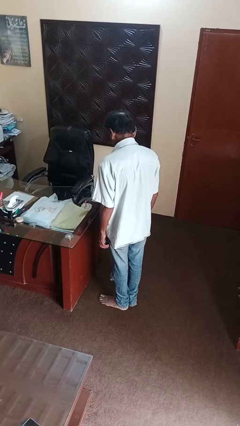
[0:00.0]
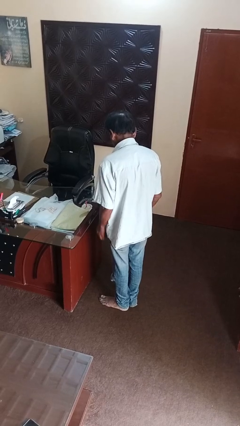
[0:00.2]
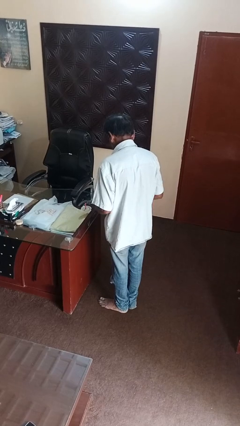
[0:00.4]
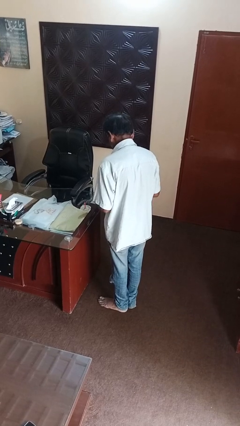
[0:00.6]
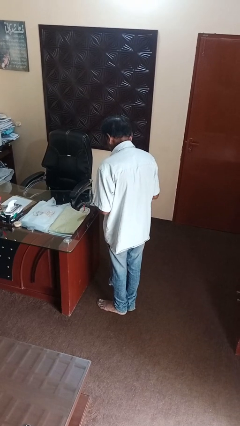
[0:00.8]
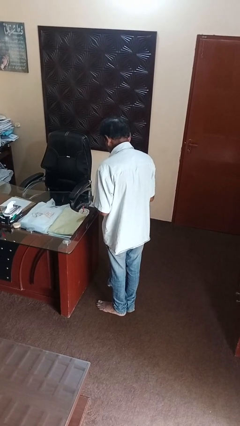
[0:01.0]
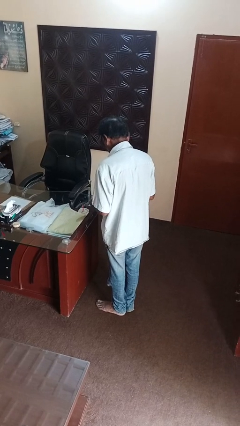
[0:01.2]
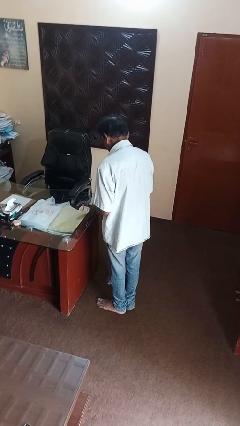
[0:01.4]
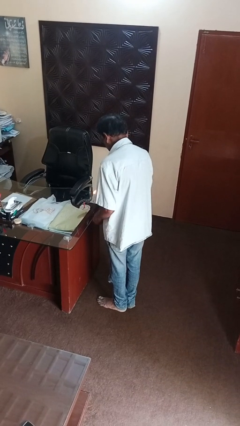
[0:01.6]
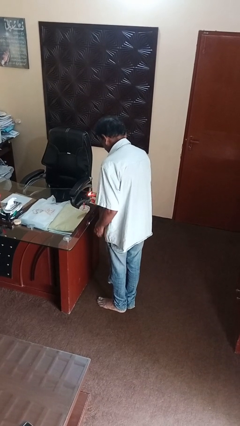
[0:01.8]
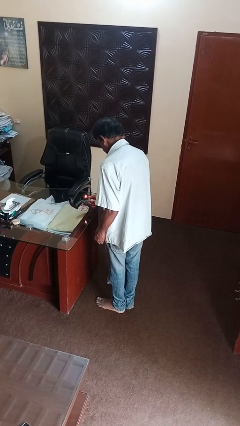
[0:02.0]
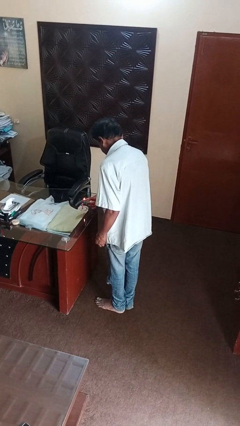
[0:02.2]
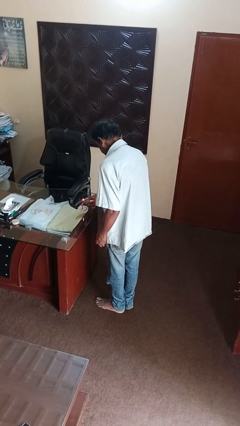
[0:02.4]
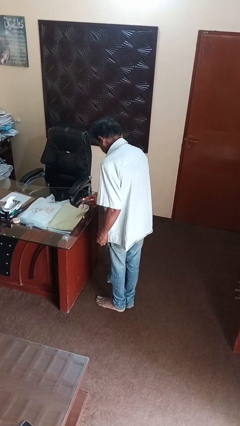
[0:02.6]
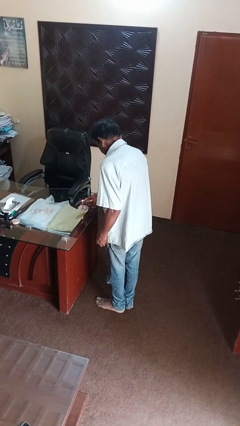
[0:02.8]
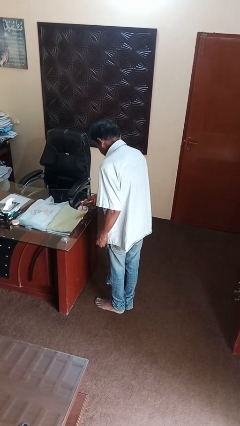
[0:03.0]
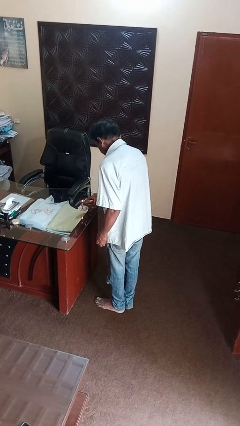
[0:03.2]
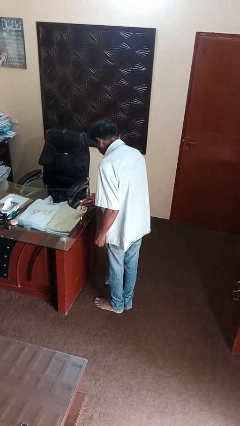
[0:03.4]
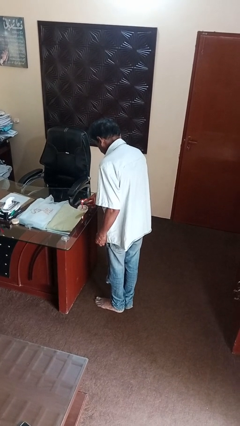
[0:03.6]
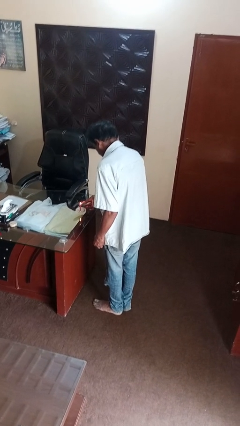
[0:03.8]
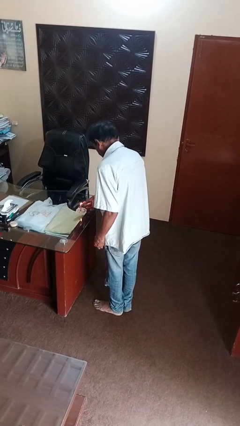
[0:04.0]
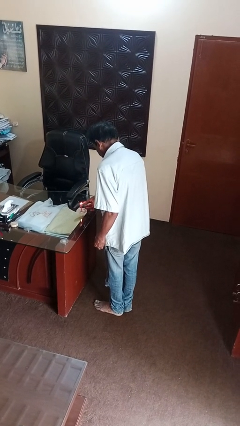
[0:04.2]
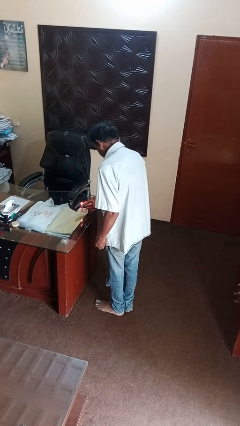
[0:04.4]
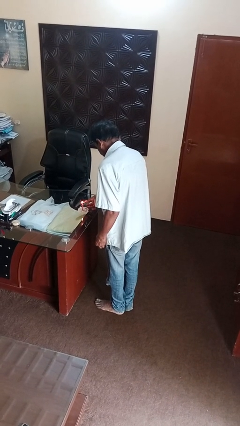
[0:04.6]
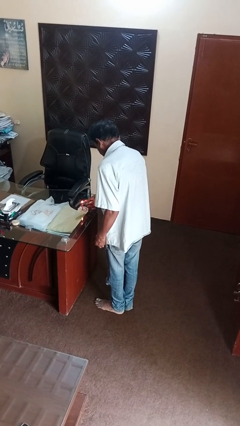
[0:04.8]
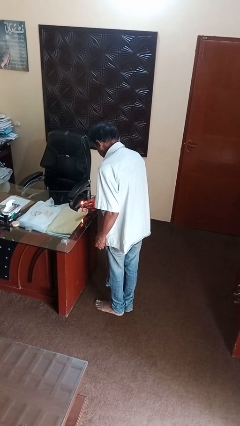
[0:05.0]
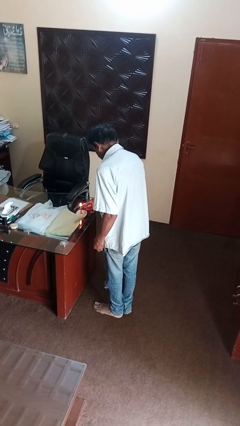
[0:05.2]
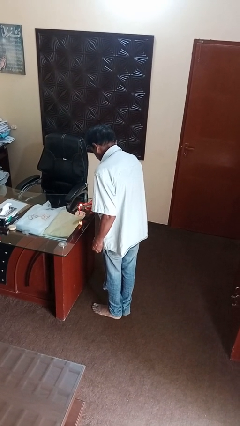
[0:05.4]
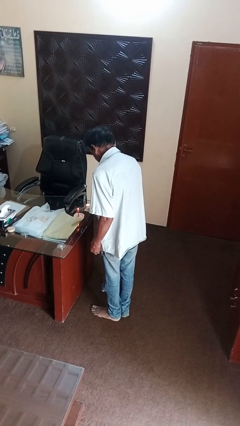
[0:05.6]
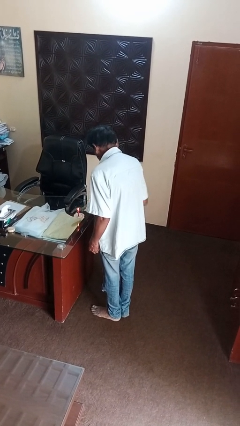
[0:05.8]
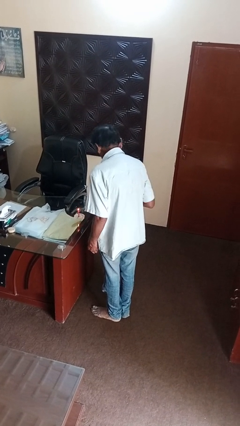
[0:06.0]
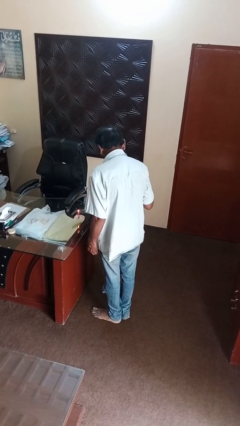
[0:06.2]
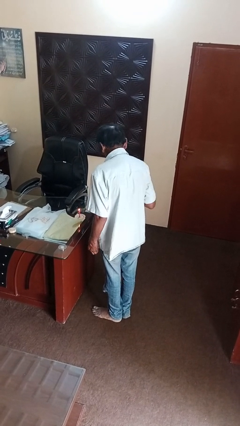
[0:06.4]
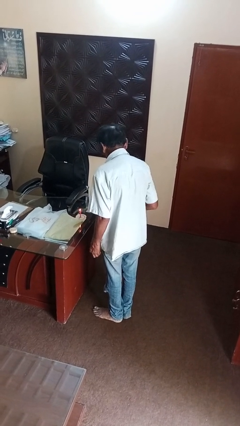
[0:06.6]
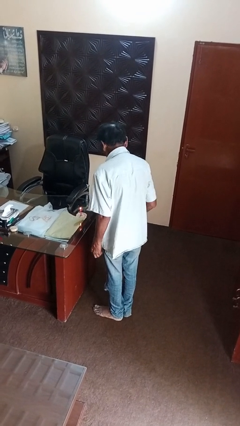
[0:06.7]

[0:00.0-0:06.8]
person lights candle

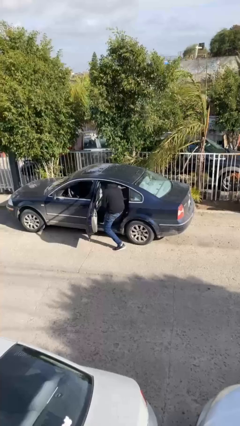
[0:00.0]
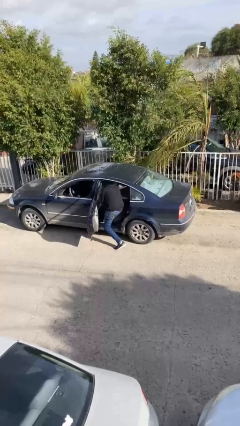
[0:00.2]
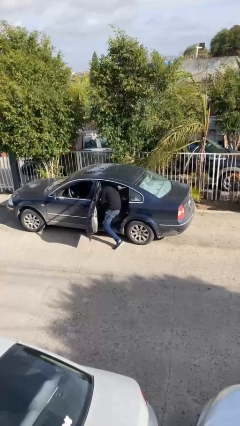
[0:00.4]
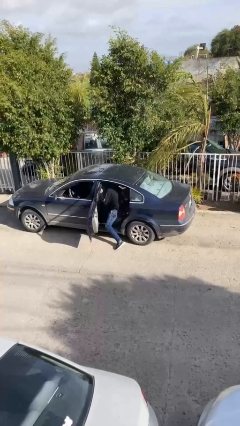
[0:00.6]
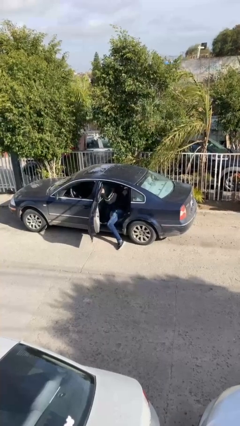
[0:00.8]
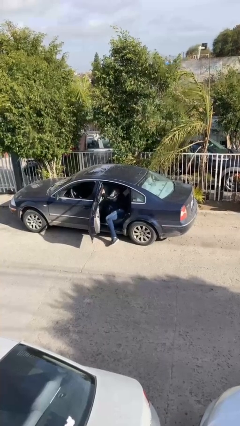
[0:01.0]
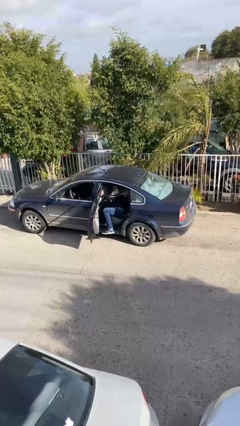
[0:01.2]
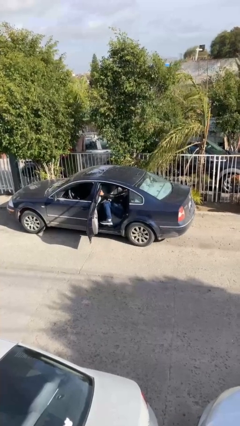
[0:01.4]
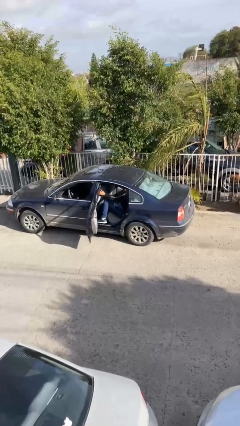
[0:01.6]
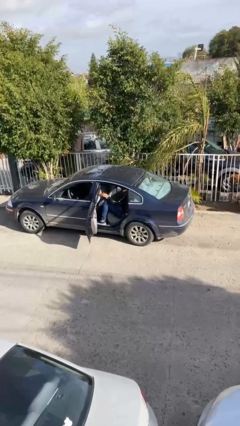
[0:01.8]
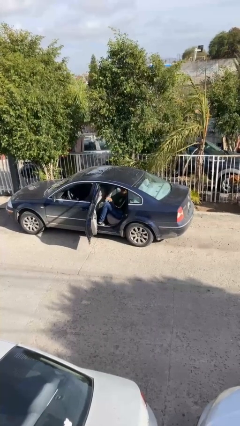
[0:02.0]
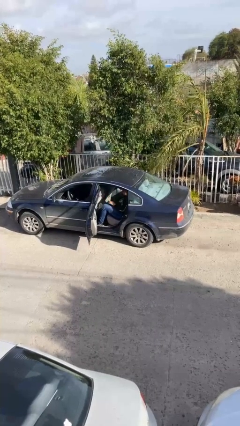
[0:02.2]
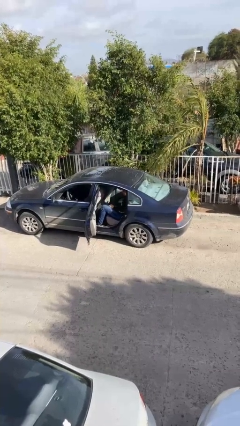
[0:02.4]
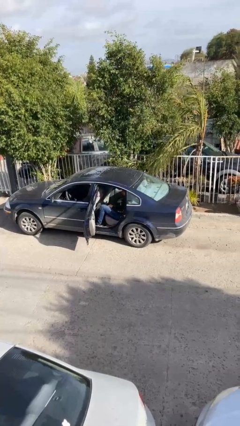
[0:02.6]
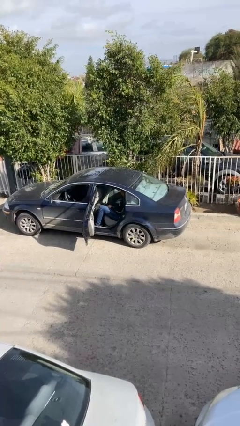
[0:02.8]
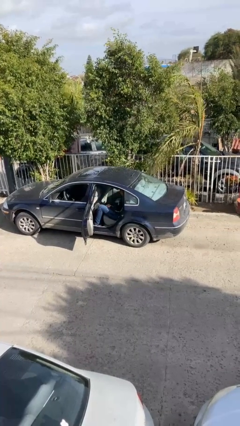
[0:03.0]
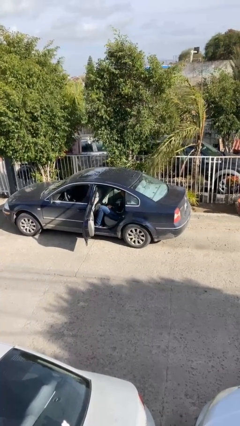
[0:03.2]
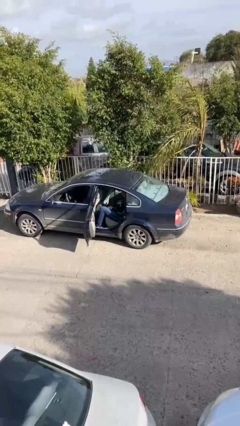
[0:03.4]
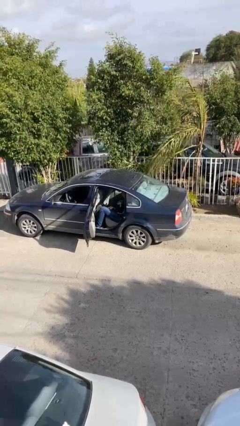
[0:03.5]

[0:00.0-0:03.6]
person enters car

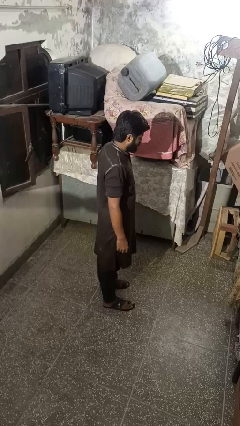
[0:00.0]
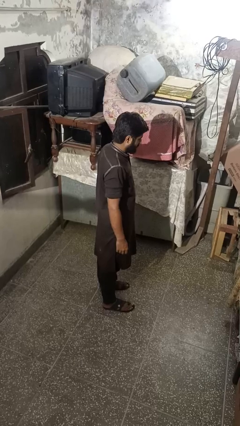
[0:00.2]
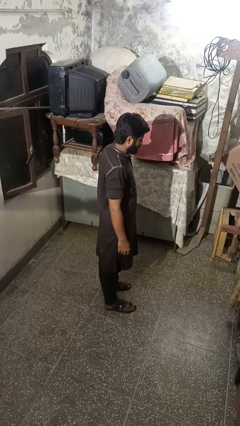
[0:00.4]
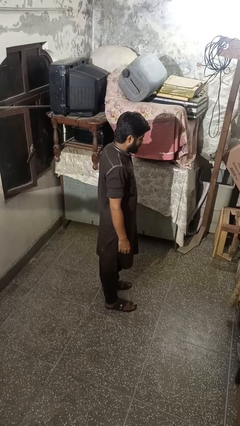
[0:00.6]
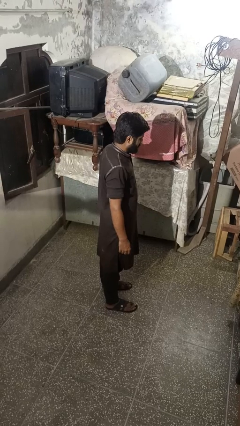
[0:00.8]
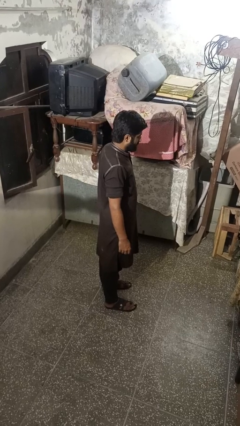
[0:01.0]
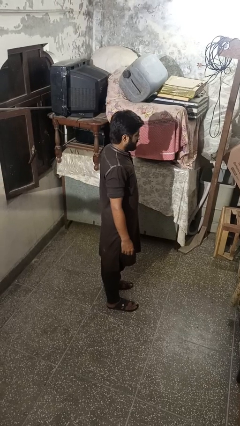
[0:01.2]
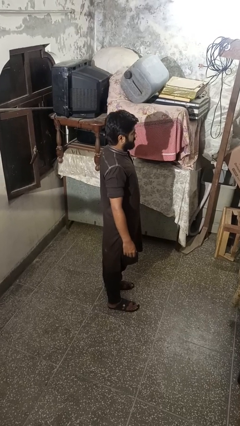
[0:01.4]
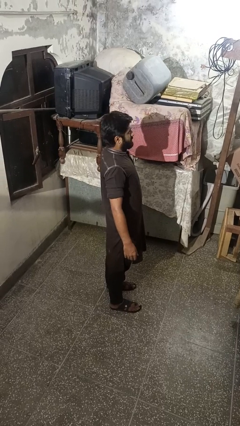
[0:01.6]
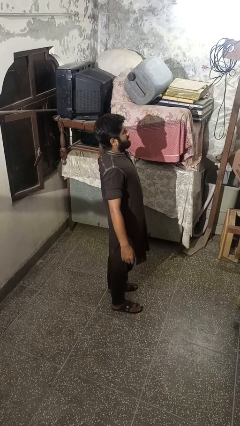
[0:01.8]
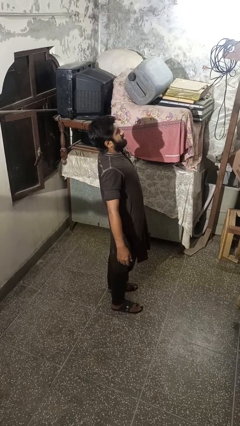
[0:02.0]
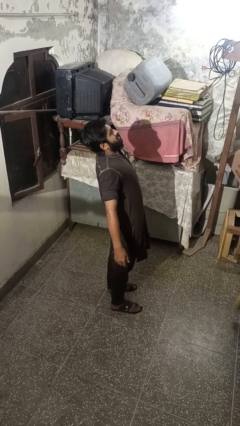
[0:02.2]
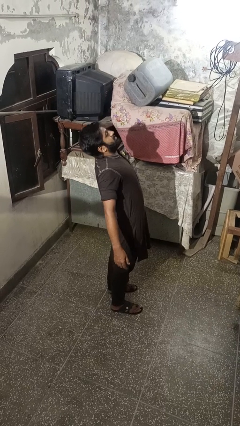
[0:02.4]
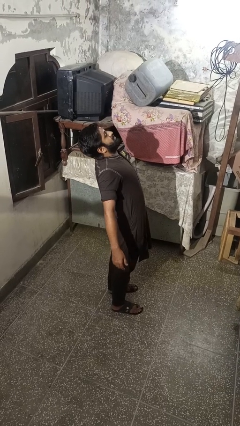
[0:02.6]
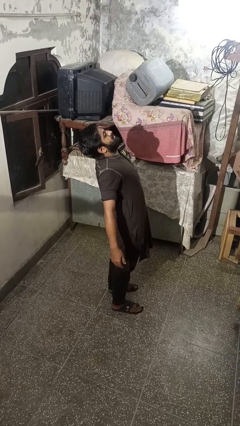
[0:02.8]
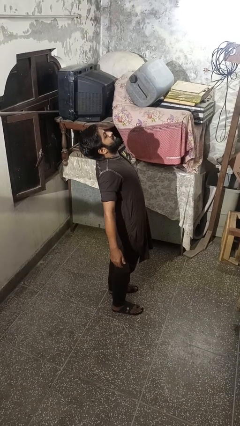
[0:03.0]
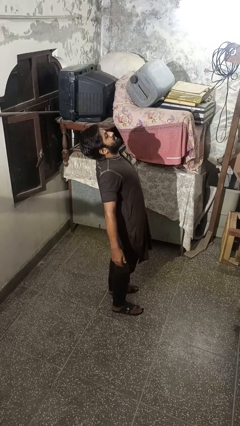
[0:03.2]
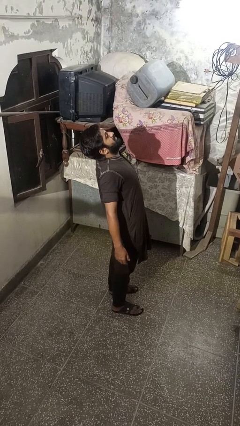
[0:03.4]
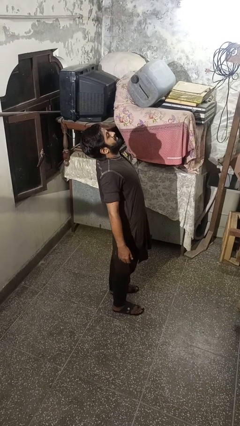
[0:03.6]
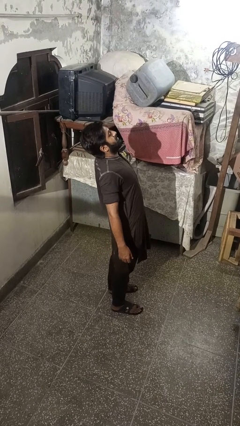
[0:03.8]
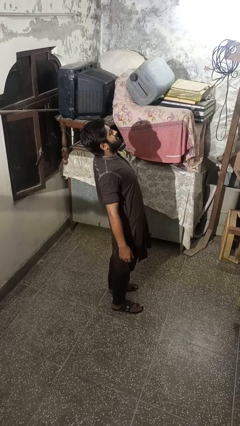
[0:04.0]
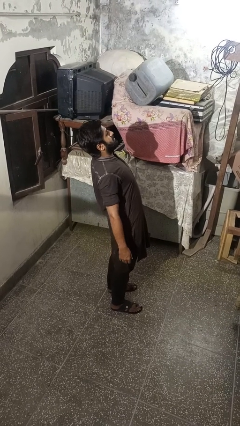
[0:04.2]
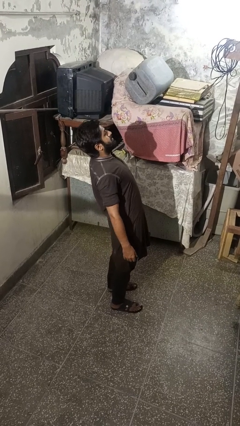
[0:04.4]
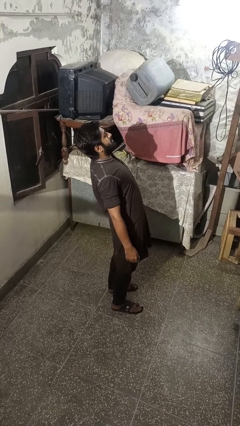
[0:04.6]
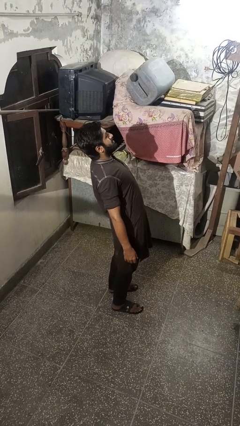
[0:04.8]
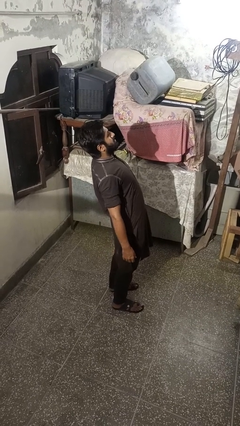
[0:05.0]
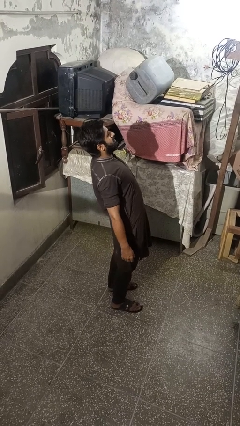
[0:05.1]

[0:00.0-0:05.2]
person stretches back

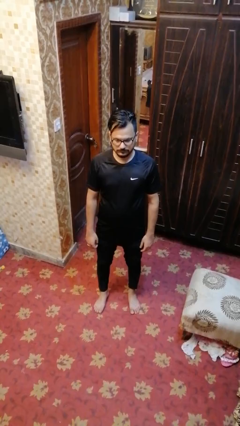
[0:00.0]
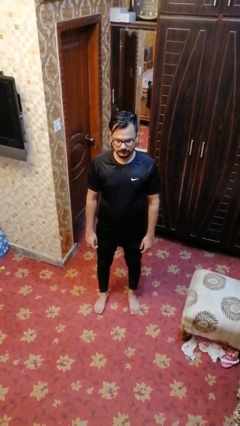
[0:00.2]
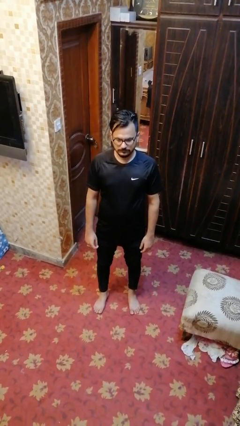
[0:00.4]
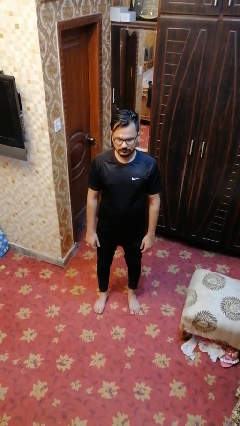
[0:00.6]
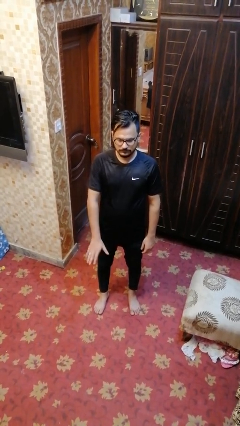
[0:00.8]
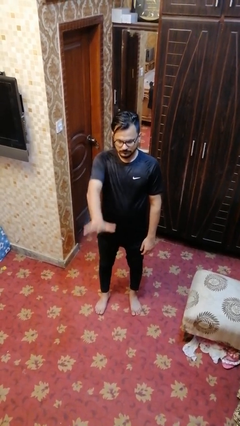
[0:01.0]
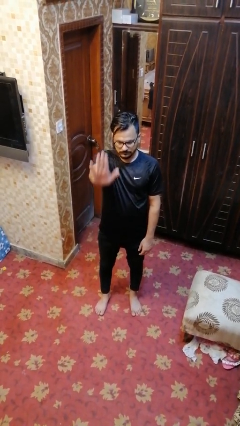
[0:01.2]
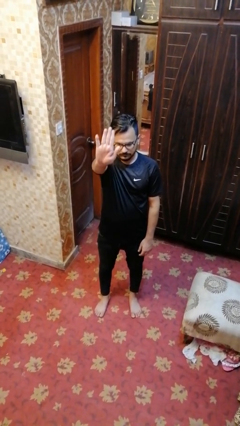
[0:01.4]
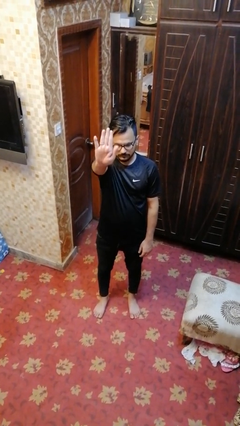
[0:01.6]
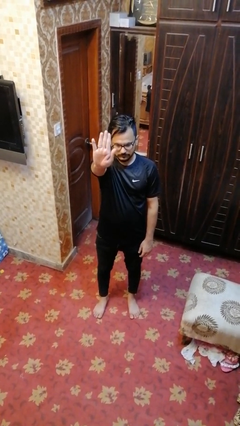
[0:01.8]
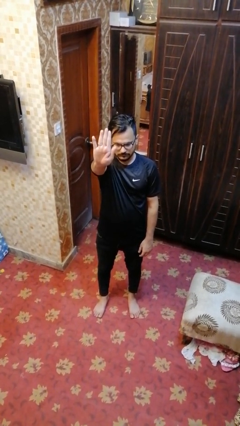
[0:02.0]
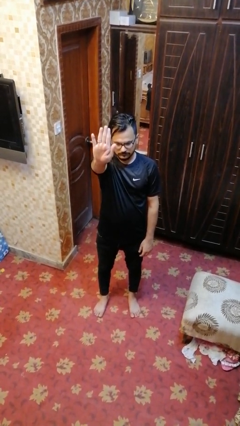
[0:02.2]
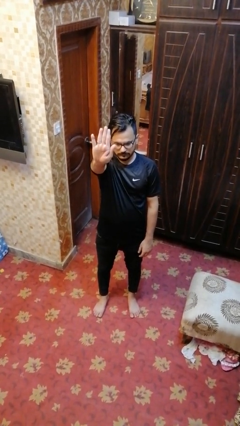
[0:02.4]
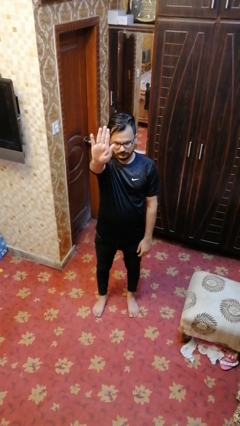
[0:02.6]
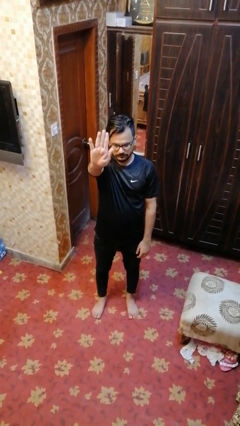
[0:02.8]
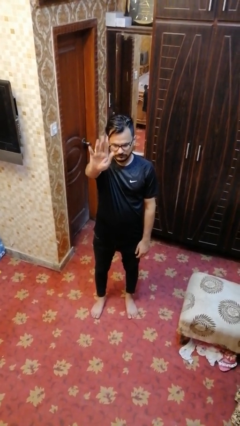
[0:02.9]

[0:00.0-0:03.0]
person gestures number five
